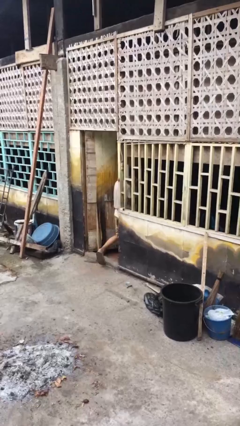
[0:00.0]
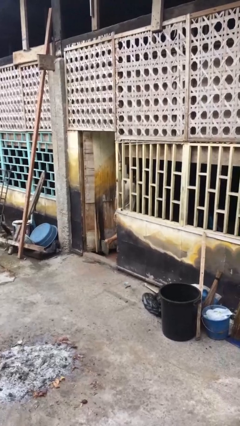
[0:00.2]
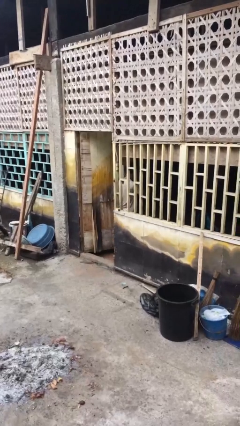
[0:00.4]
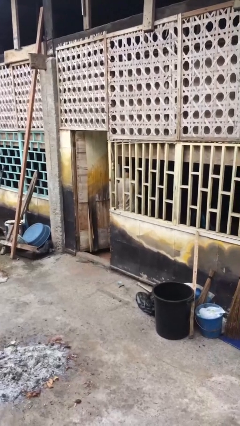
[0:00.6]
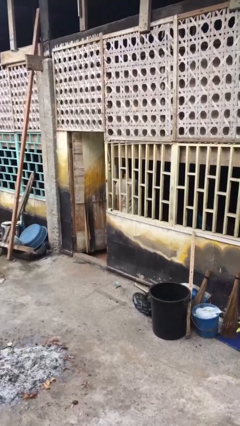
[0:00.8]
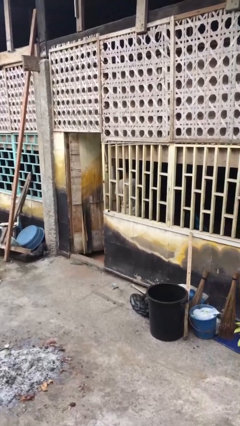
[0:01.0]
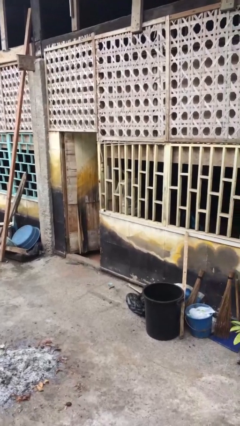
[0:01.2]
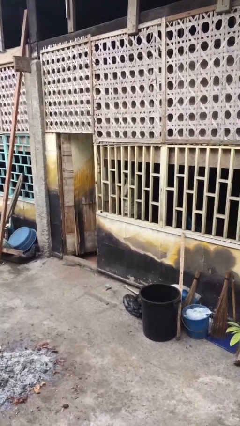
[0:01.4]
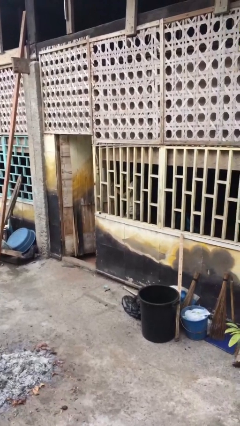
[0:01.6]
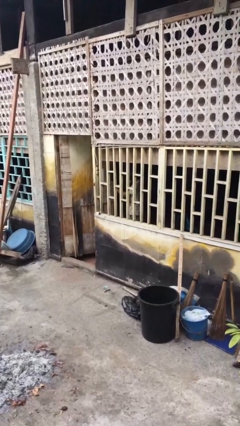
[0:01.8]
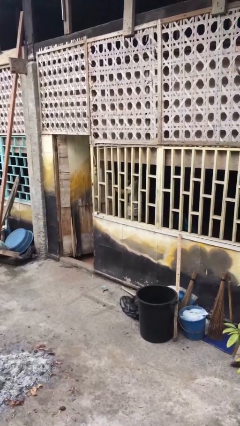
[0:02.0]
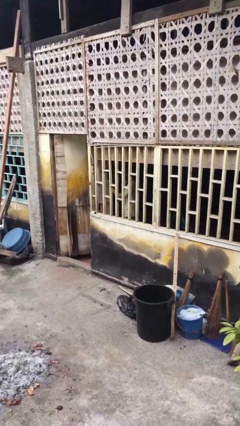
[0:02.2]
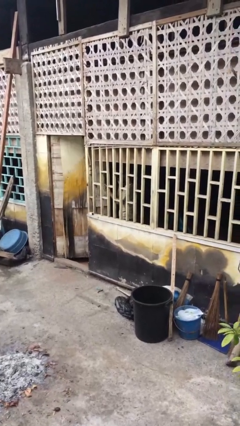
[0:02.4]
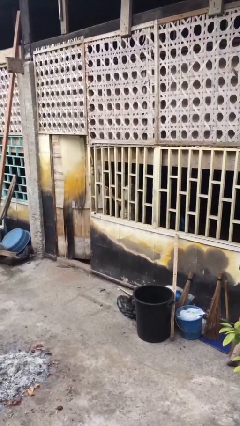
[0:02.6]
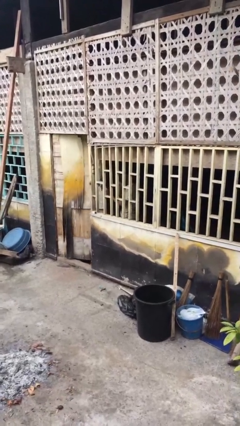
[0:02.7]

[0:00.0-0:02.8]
person enters scene through structure

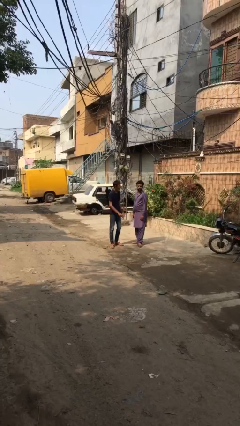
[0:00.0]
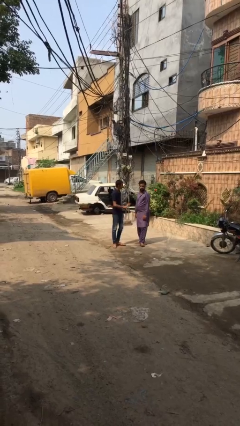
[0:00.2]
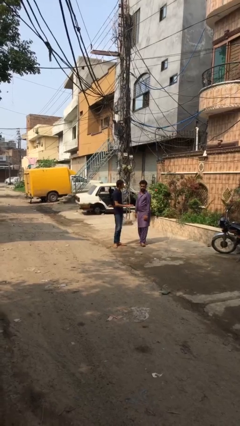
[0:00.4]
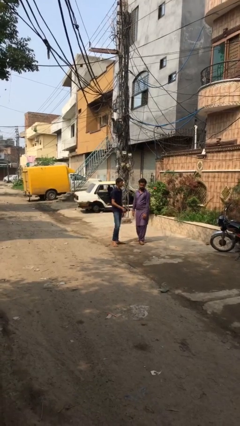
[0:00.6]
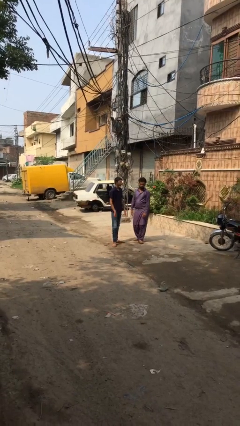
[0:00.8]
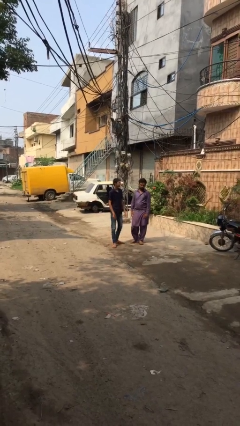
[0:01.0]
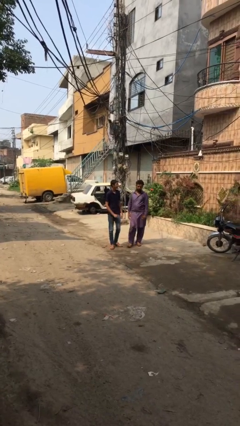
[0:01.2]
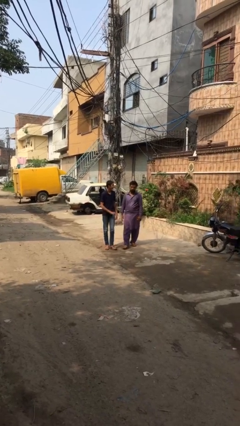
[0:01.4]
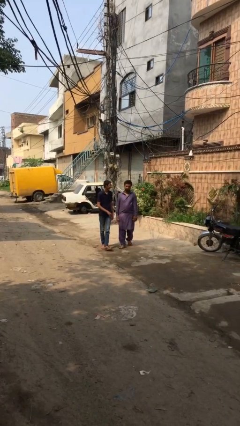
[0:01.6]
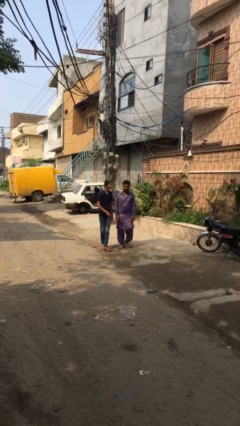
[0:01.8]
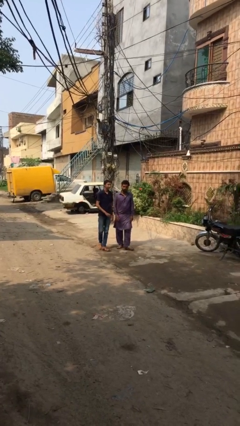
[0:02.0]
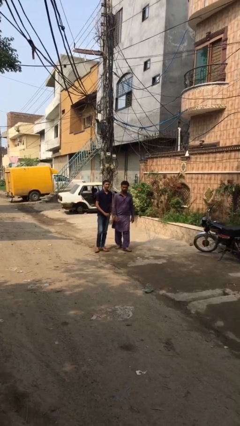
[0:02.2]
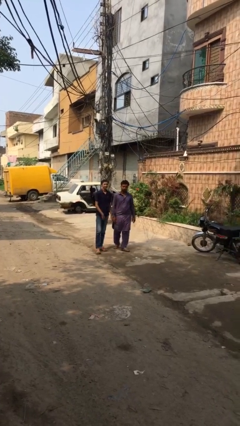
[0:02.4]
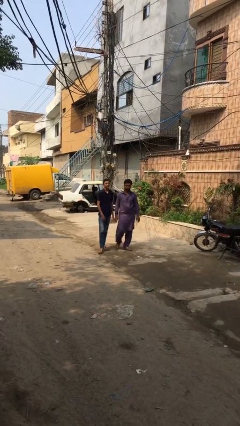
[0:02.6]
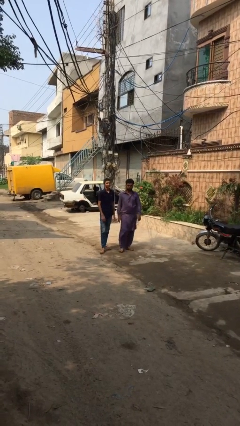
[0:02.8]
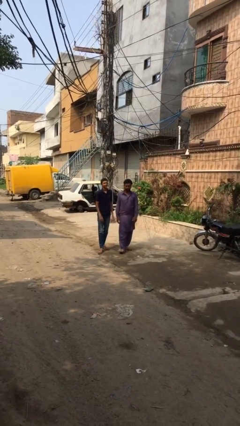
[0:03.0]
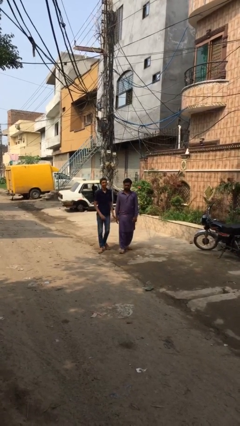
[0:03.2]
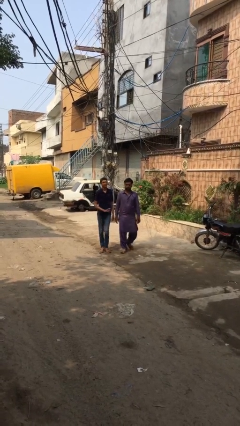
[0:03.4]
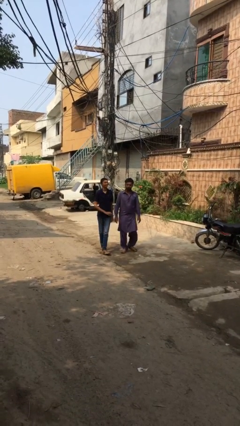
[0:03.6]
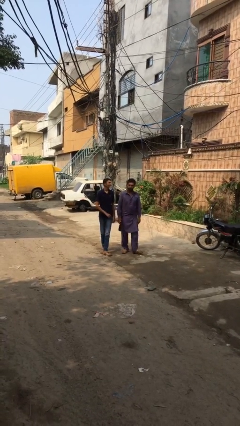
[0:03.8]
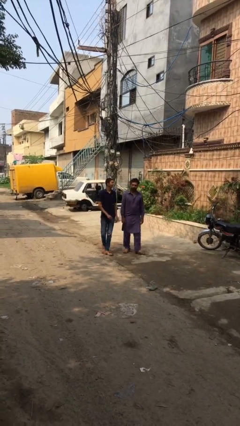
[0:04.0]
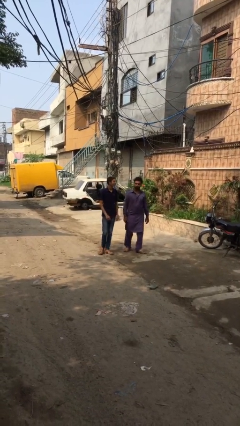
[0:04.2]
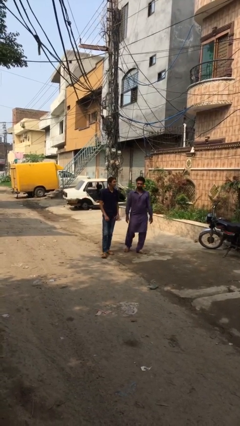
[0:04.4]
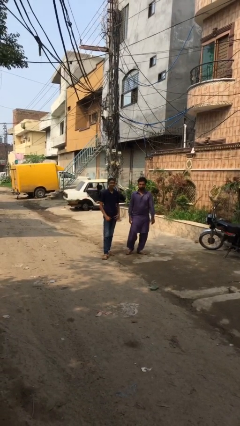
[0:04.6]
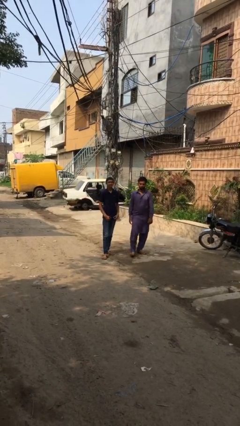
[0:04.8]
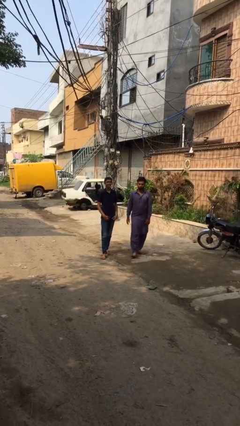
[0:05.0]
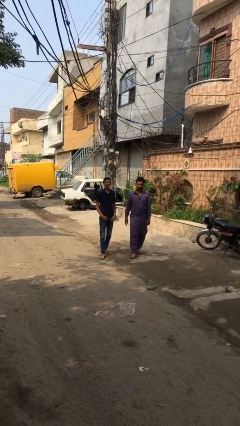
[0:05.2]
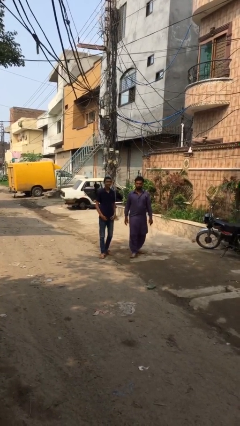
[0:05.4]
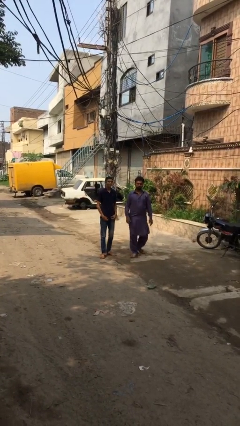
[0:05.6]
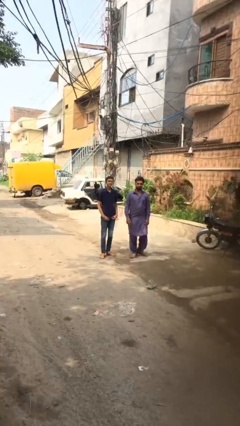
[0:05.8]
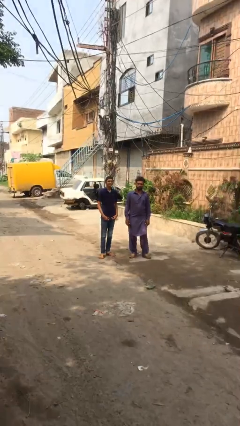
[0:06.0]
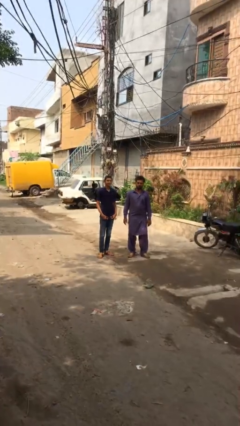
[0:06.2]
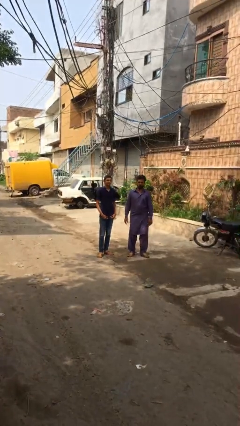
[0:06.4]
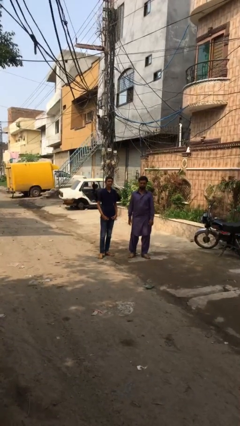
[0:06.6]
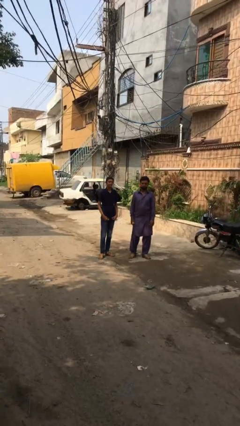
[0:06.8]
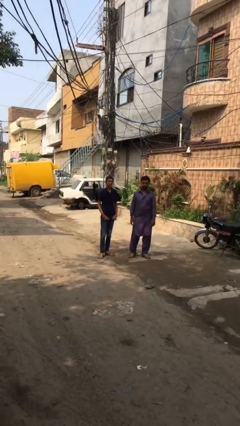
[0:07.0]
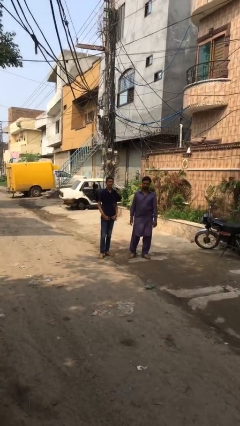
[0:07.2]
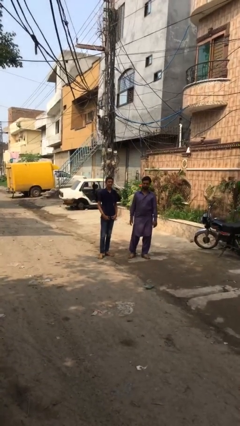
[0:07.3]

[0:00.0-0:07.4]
person talks to person

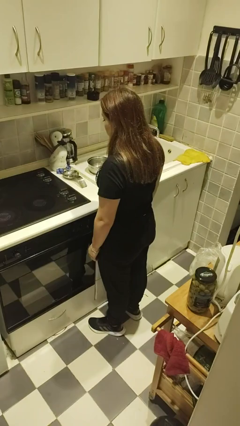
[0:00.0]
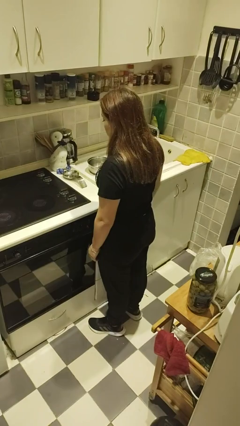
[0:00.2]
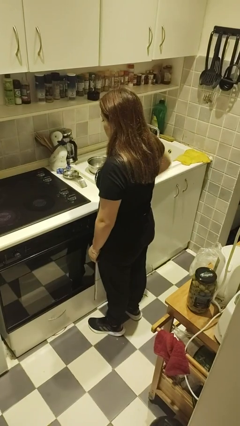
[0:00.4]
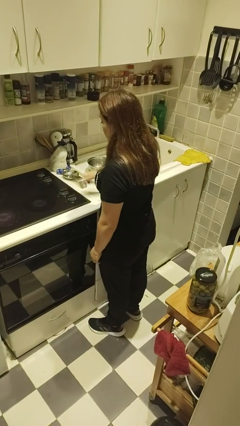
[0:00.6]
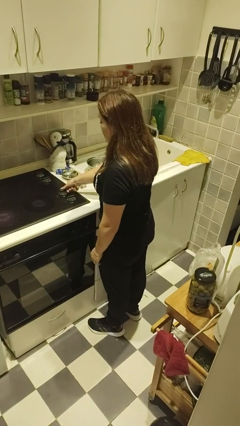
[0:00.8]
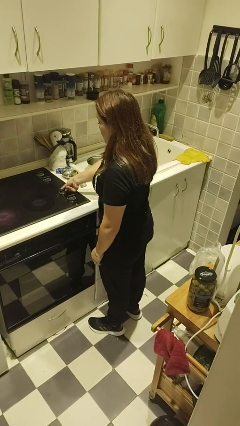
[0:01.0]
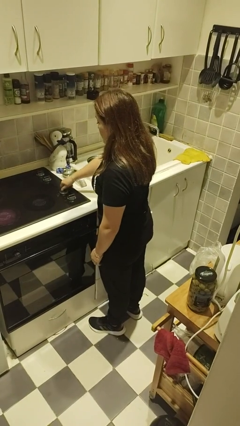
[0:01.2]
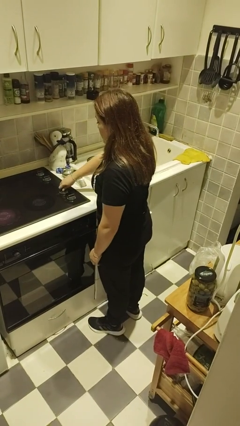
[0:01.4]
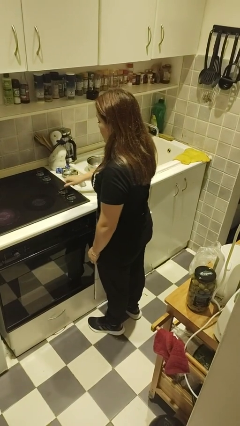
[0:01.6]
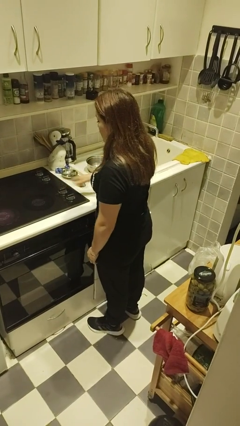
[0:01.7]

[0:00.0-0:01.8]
person turns off stovetop

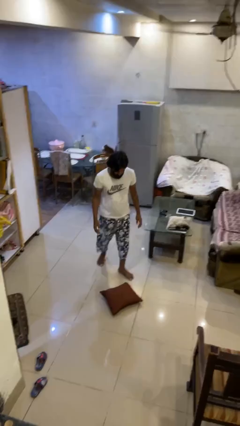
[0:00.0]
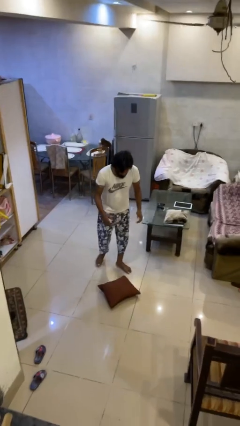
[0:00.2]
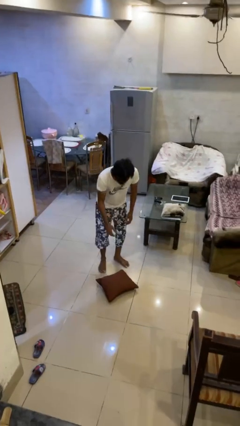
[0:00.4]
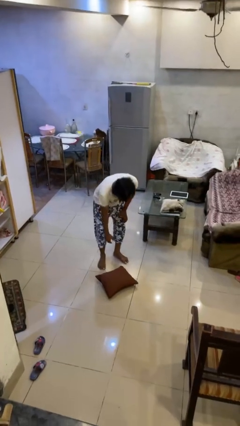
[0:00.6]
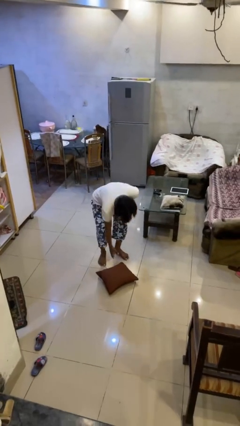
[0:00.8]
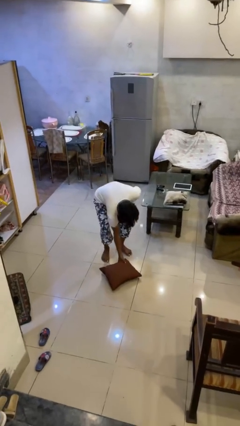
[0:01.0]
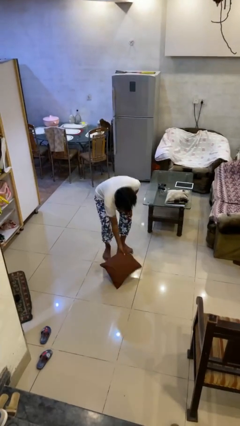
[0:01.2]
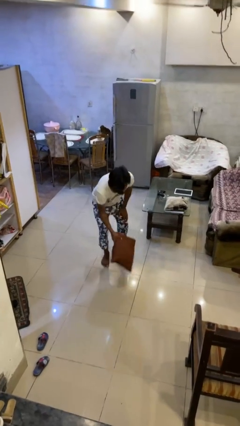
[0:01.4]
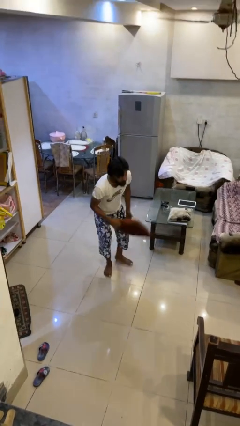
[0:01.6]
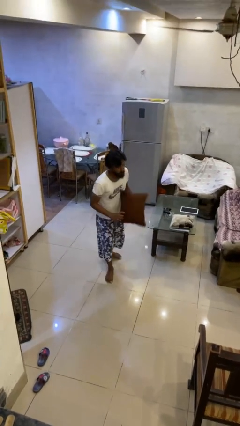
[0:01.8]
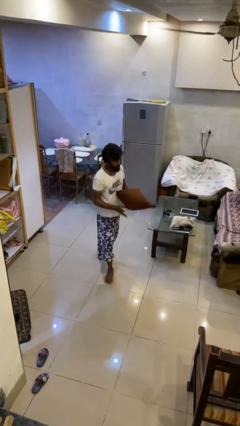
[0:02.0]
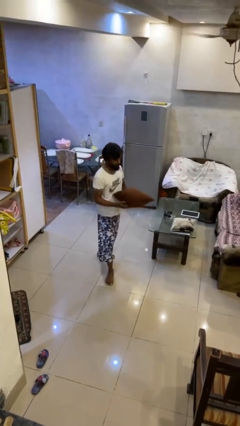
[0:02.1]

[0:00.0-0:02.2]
person picks up object from floor

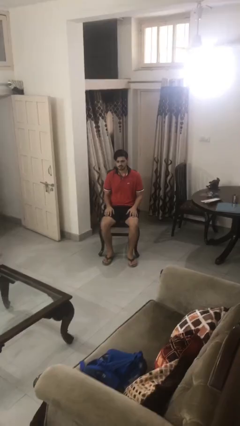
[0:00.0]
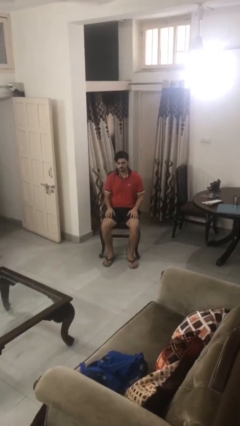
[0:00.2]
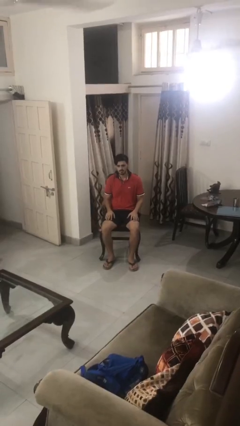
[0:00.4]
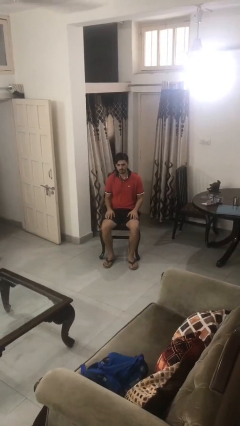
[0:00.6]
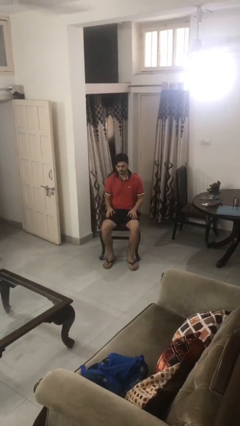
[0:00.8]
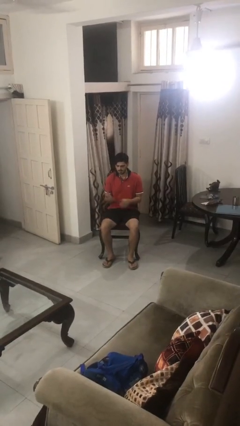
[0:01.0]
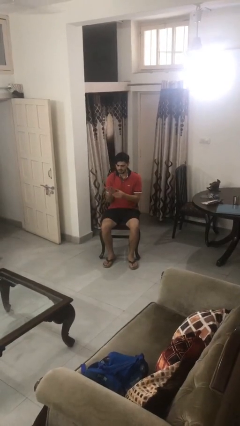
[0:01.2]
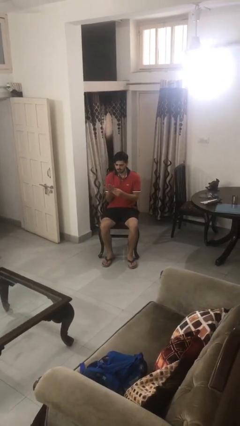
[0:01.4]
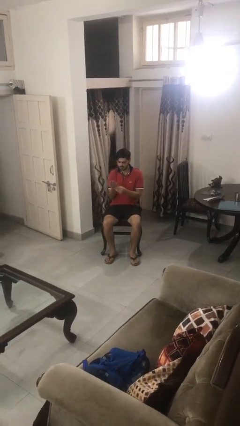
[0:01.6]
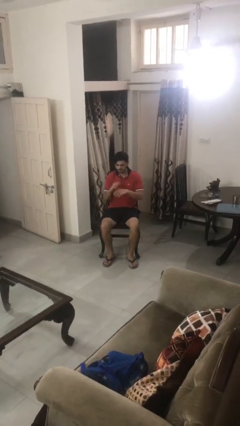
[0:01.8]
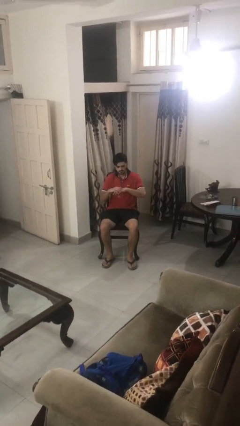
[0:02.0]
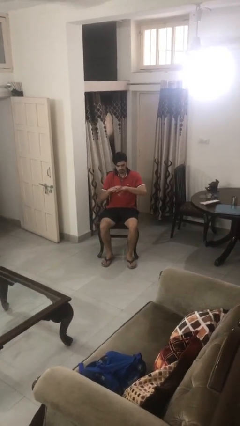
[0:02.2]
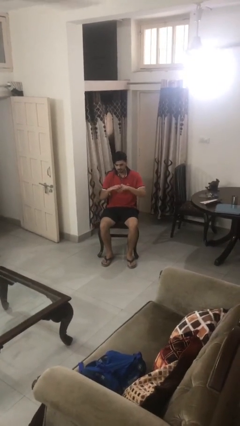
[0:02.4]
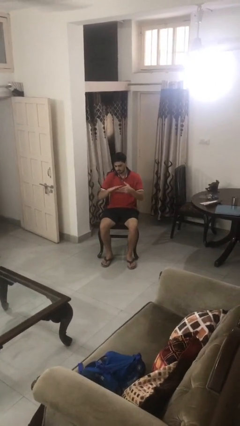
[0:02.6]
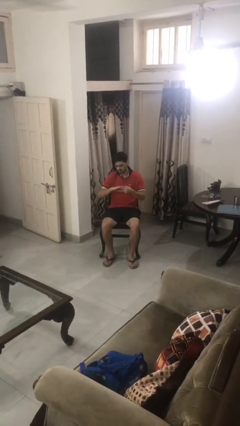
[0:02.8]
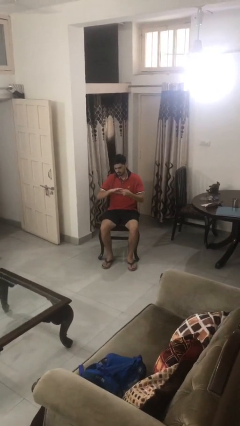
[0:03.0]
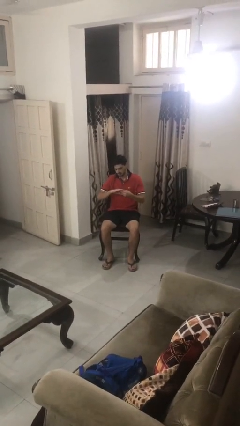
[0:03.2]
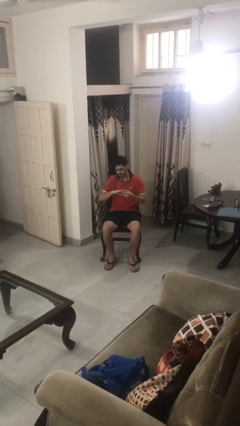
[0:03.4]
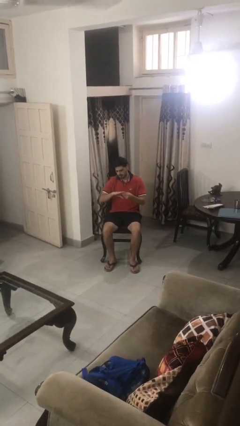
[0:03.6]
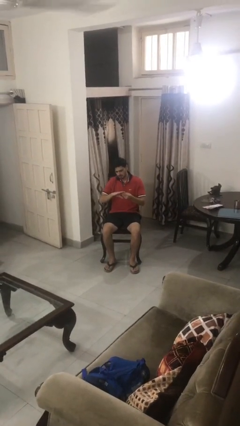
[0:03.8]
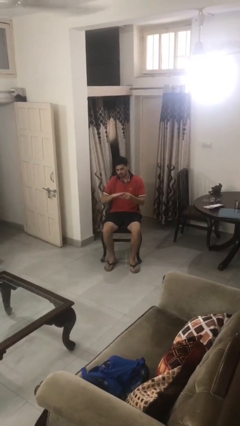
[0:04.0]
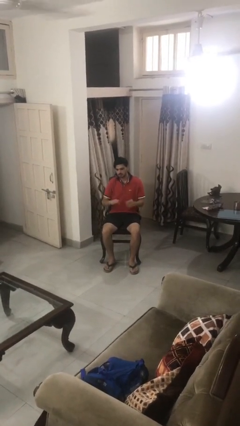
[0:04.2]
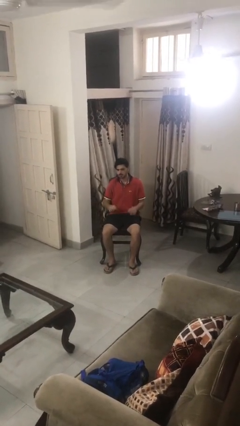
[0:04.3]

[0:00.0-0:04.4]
person looks at hands in lap
